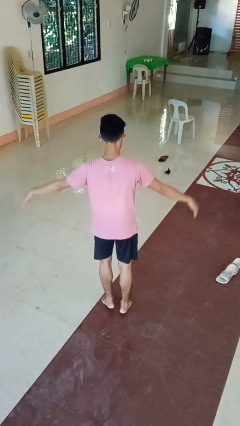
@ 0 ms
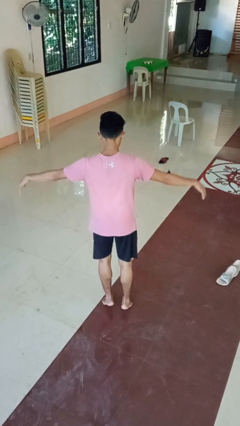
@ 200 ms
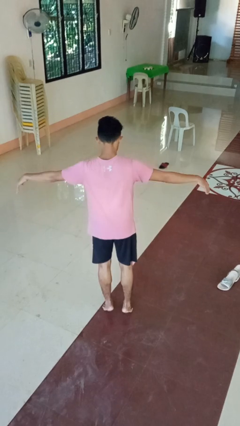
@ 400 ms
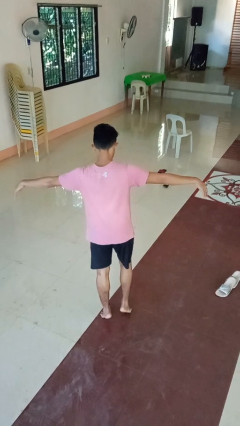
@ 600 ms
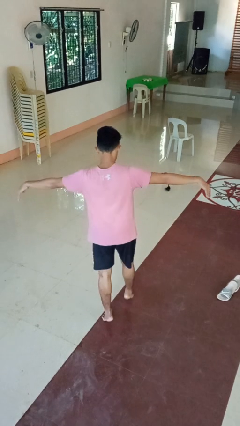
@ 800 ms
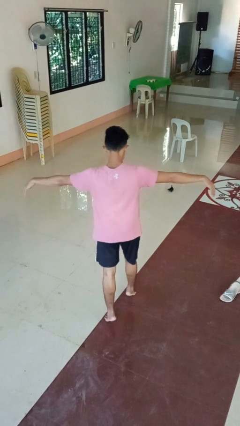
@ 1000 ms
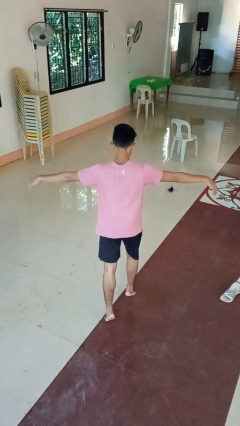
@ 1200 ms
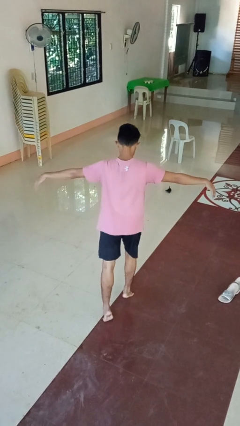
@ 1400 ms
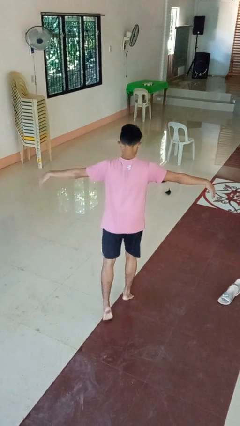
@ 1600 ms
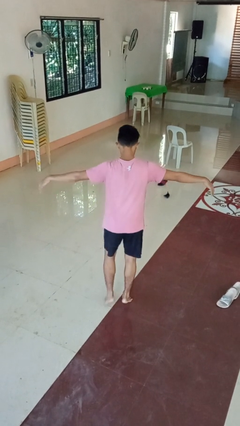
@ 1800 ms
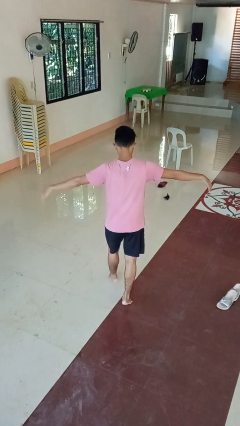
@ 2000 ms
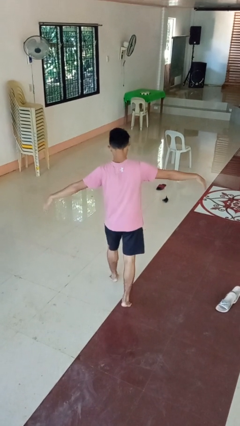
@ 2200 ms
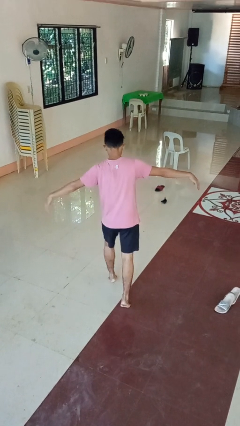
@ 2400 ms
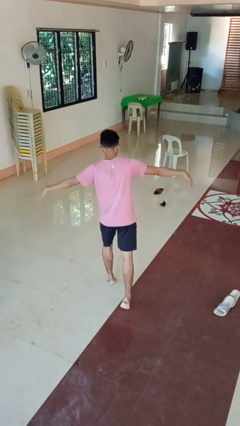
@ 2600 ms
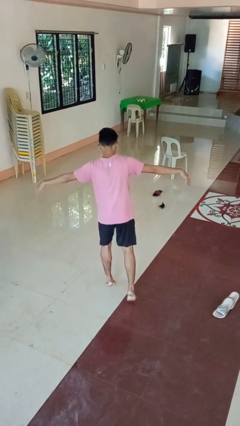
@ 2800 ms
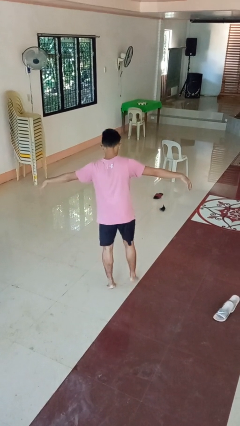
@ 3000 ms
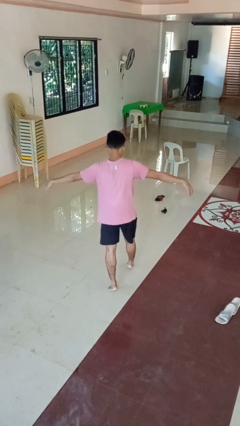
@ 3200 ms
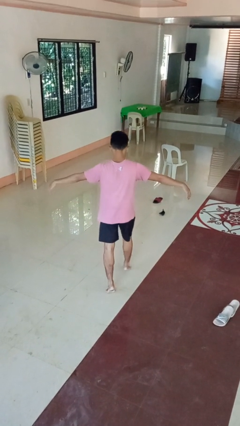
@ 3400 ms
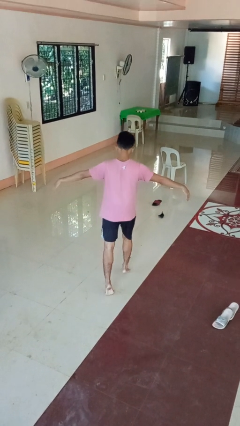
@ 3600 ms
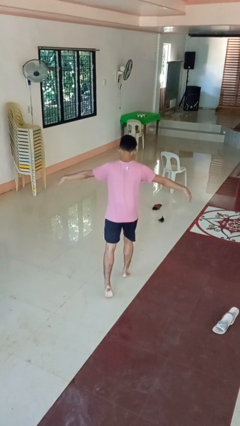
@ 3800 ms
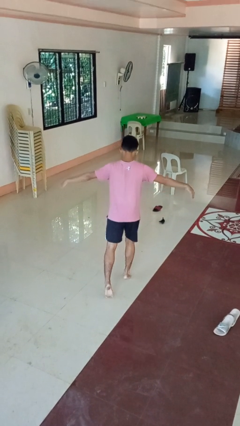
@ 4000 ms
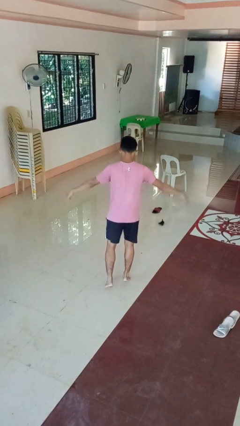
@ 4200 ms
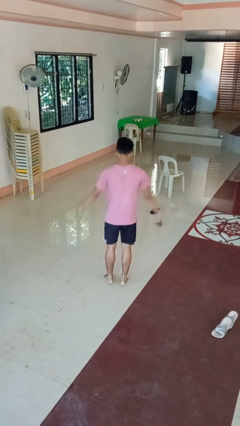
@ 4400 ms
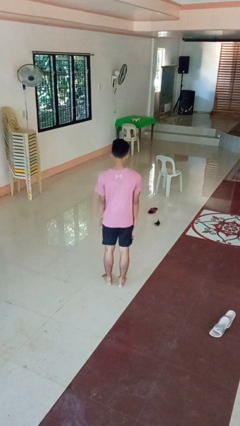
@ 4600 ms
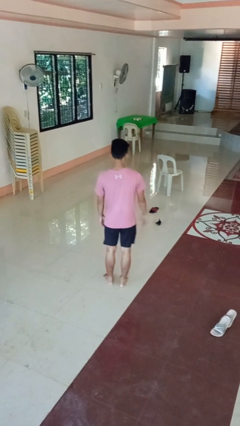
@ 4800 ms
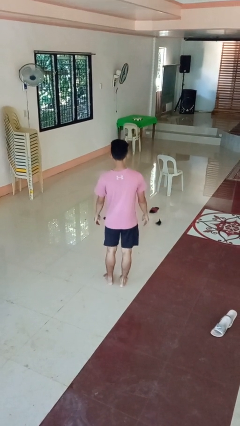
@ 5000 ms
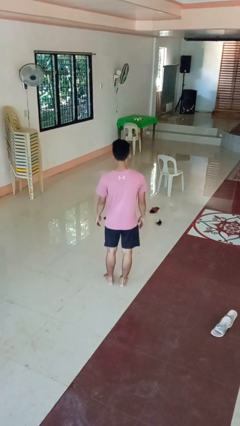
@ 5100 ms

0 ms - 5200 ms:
person walks tiptoe

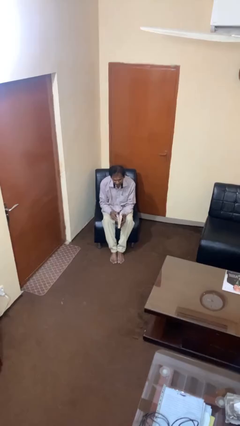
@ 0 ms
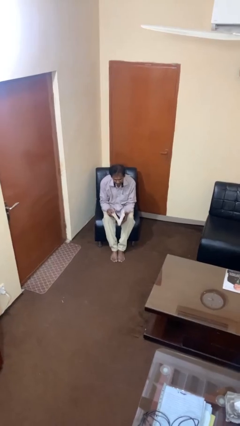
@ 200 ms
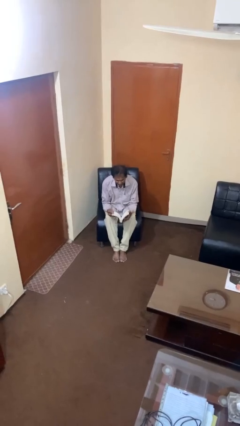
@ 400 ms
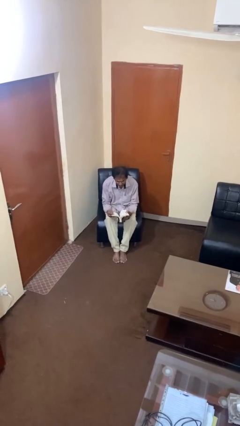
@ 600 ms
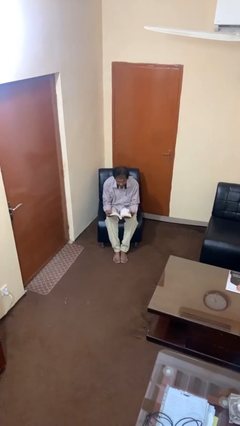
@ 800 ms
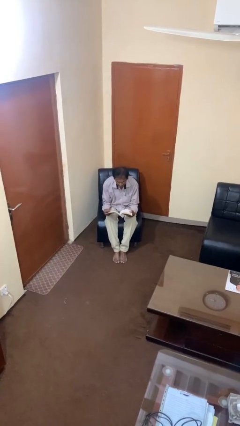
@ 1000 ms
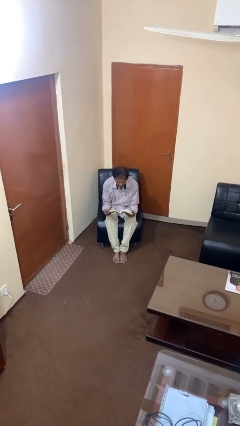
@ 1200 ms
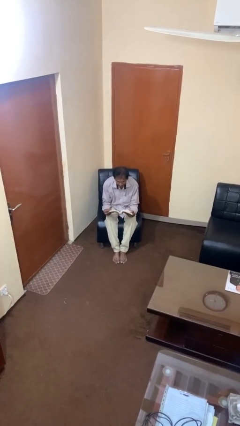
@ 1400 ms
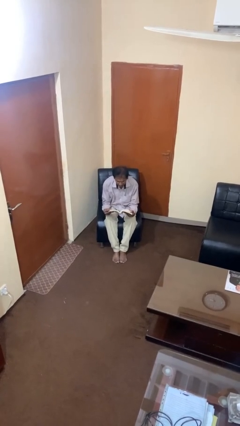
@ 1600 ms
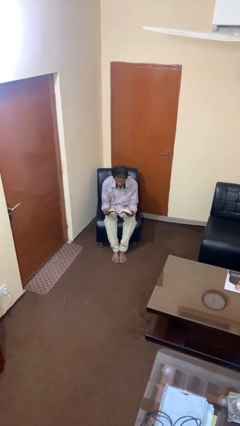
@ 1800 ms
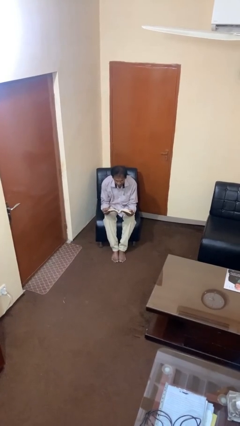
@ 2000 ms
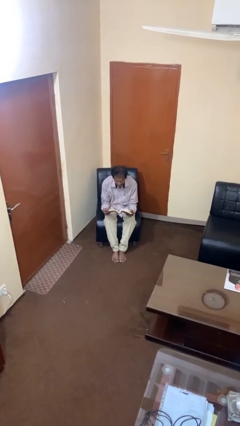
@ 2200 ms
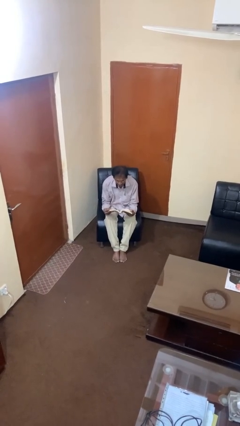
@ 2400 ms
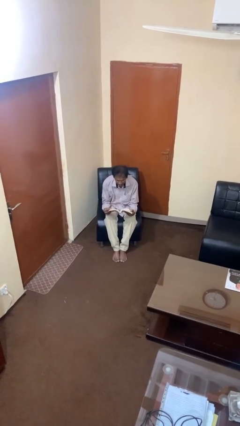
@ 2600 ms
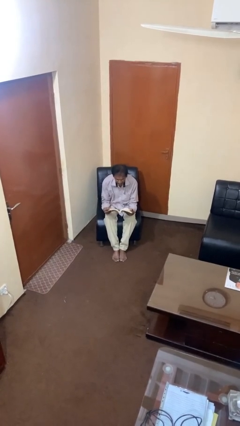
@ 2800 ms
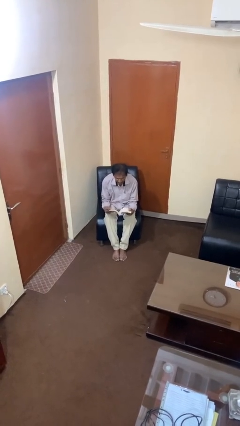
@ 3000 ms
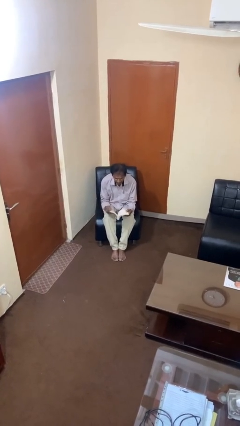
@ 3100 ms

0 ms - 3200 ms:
person reads book

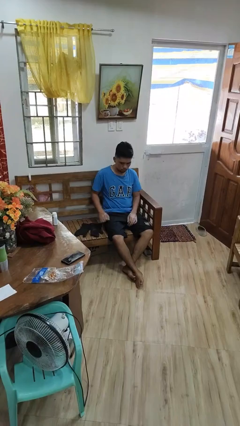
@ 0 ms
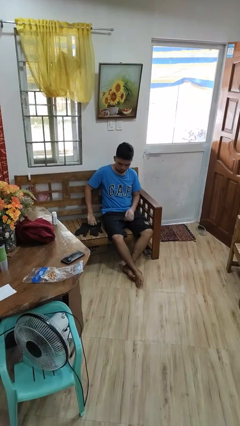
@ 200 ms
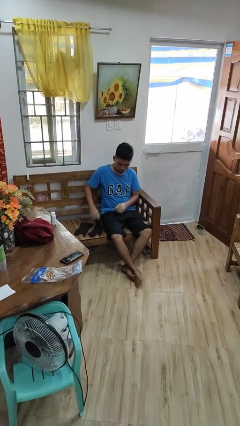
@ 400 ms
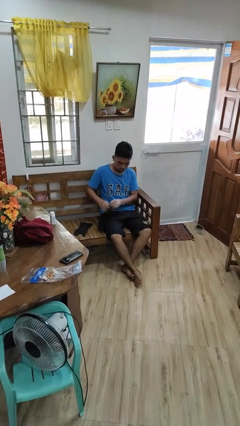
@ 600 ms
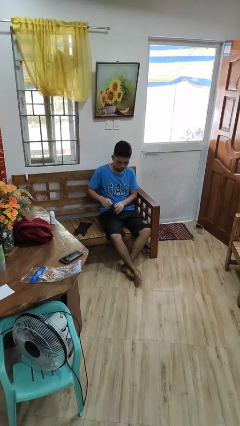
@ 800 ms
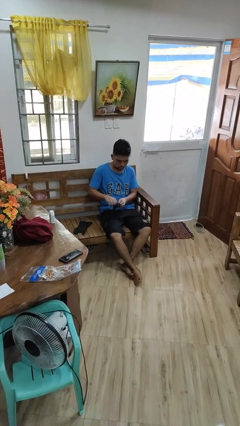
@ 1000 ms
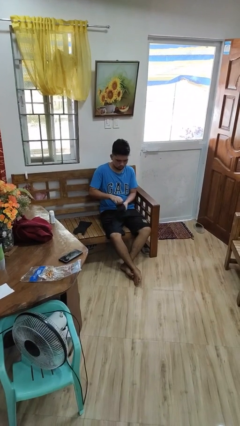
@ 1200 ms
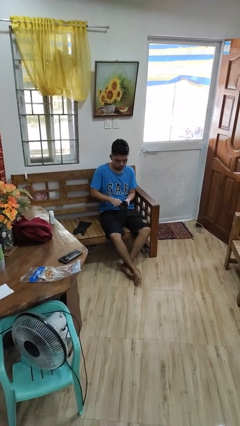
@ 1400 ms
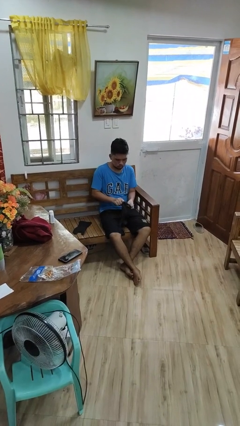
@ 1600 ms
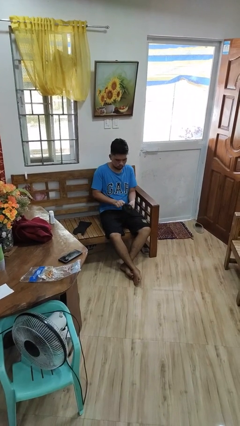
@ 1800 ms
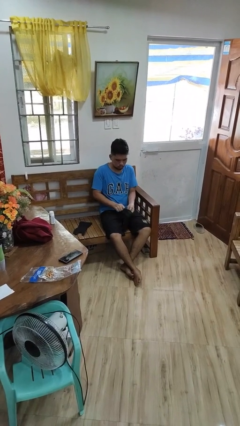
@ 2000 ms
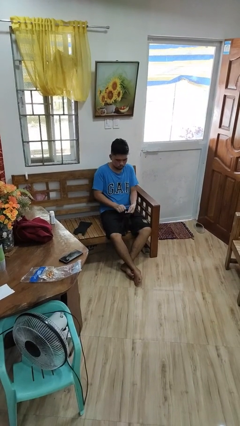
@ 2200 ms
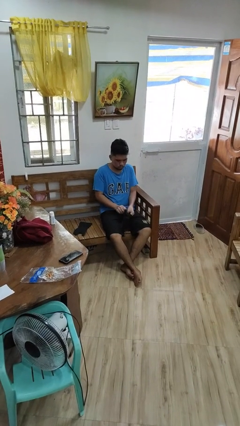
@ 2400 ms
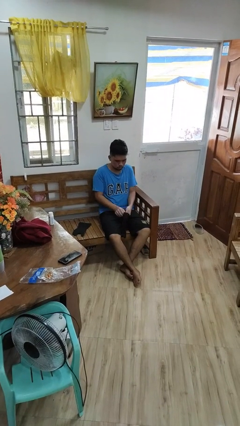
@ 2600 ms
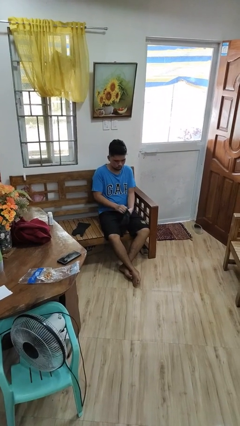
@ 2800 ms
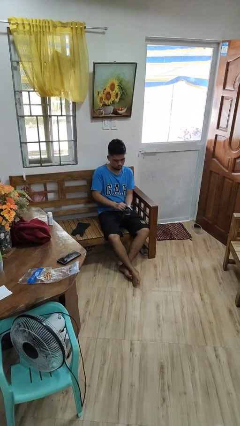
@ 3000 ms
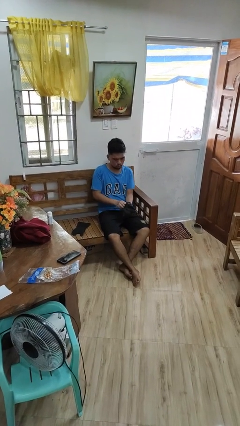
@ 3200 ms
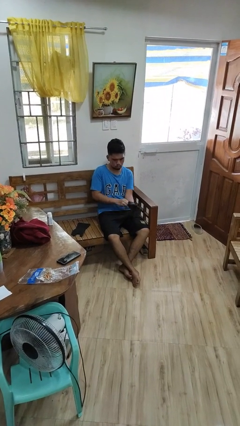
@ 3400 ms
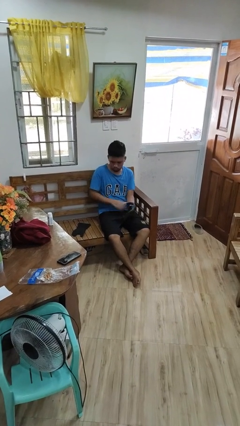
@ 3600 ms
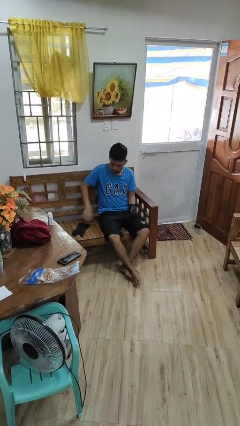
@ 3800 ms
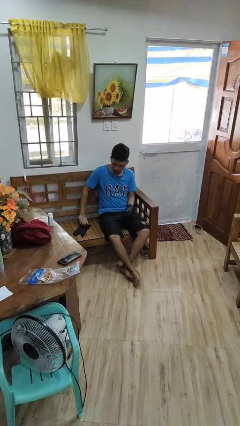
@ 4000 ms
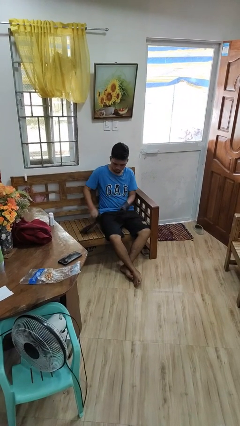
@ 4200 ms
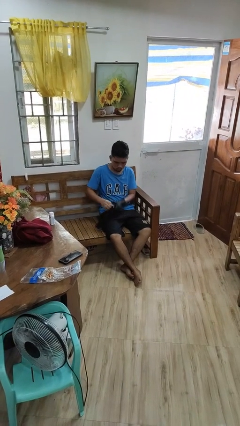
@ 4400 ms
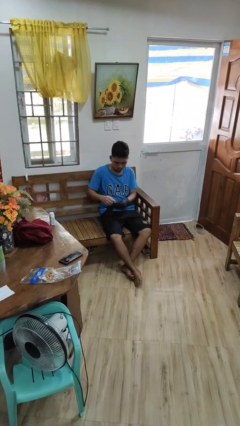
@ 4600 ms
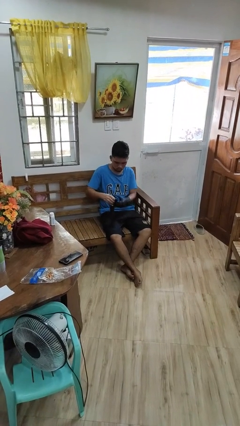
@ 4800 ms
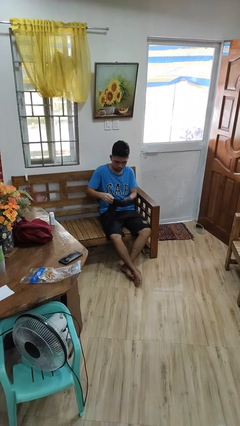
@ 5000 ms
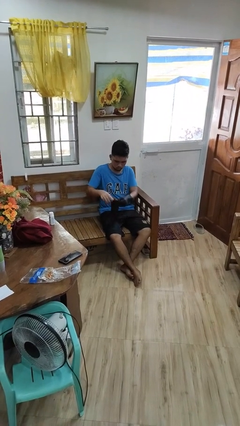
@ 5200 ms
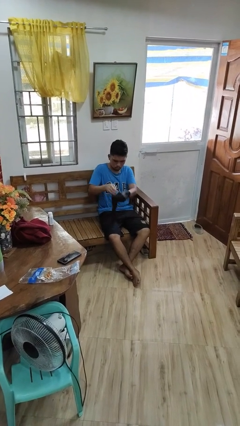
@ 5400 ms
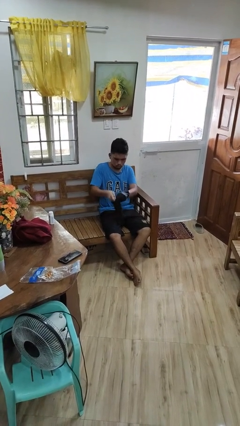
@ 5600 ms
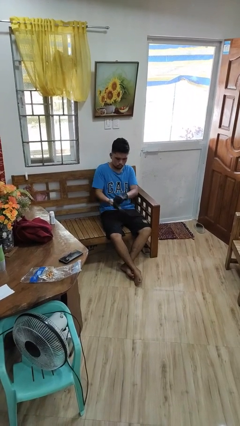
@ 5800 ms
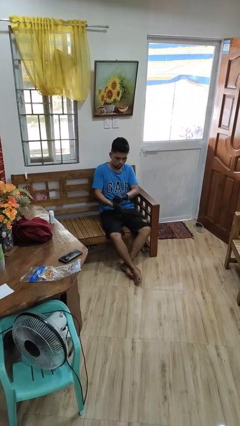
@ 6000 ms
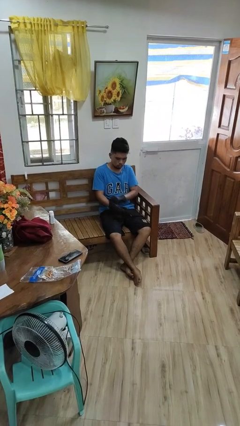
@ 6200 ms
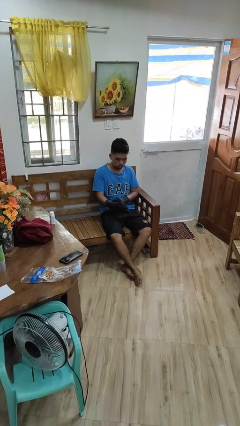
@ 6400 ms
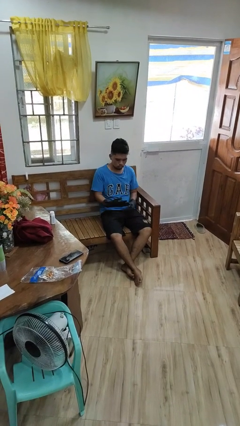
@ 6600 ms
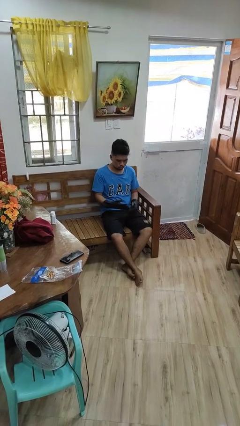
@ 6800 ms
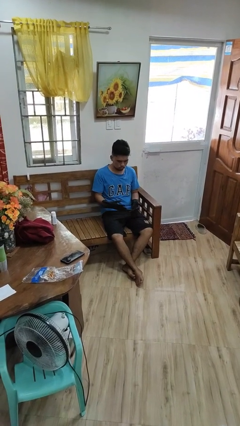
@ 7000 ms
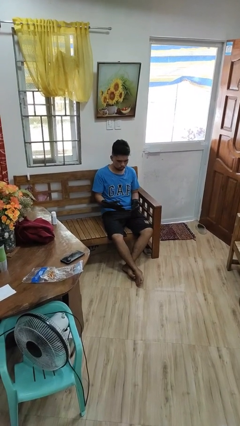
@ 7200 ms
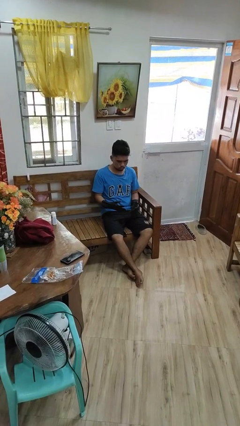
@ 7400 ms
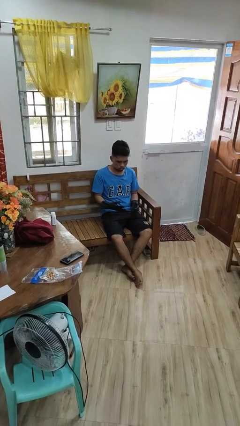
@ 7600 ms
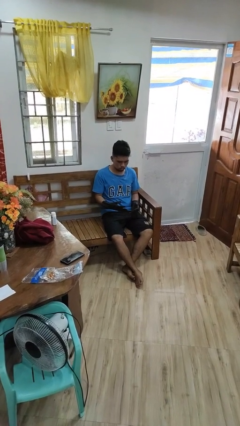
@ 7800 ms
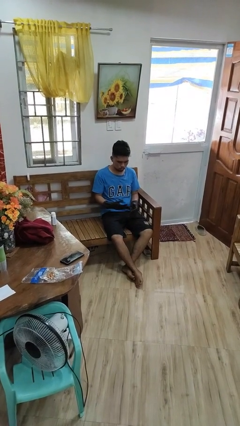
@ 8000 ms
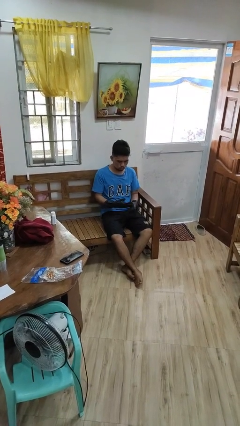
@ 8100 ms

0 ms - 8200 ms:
person puts on gloves

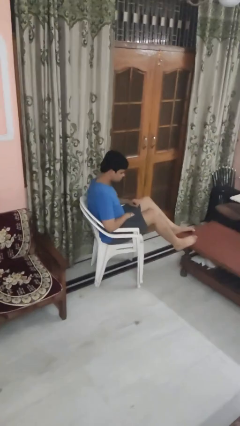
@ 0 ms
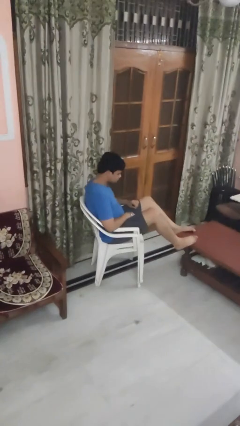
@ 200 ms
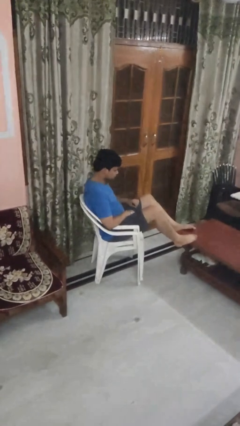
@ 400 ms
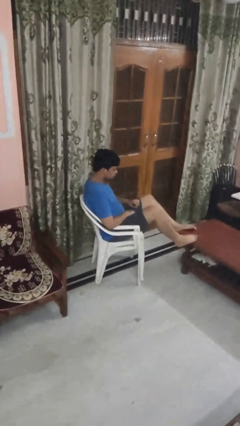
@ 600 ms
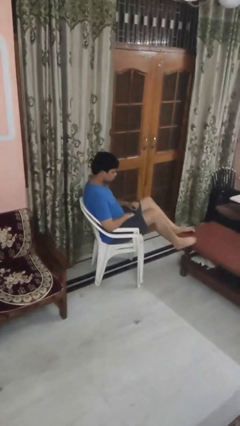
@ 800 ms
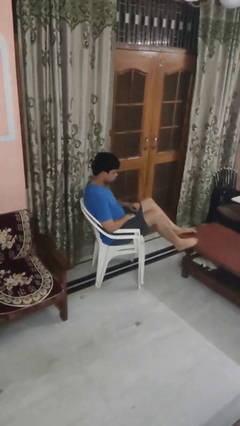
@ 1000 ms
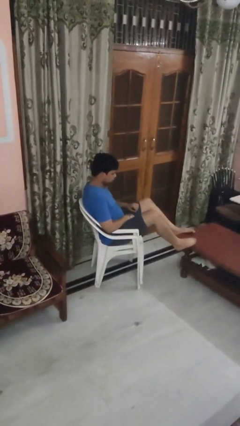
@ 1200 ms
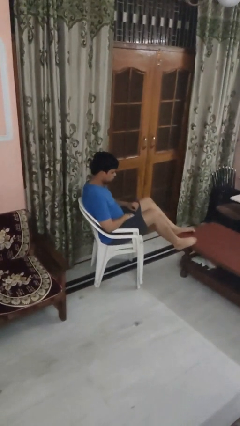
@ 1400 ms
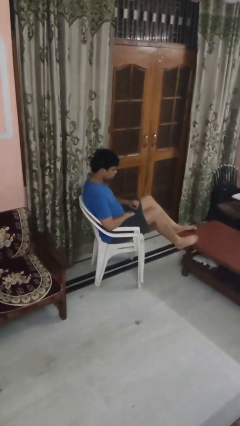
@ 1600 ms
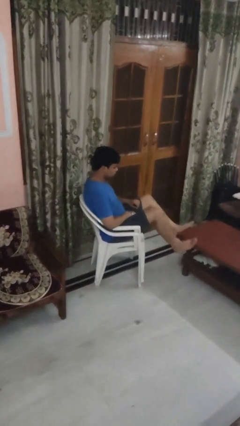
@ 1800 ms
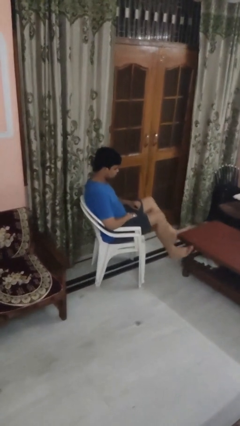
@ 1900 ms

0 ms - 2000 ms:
person puts feet up
